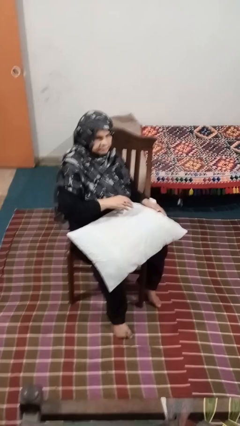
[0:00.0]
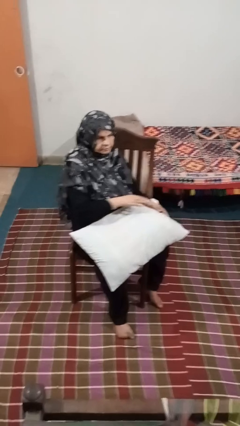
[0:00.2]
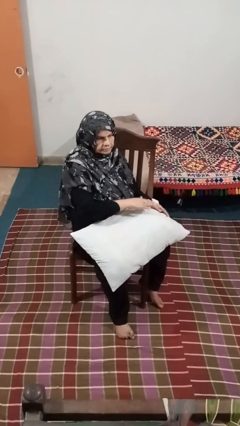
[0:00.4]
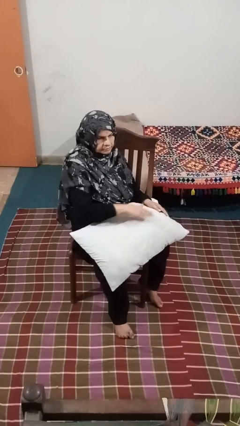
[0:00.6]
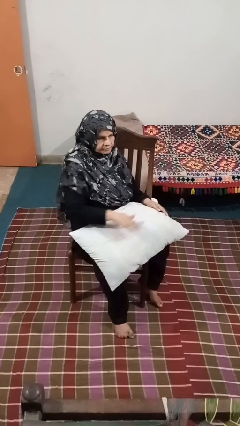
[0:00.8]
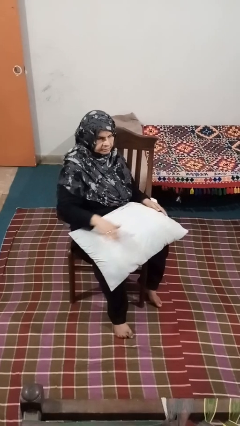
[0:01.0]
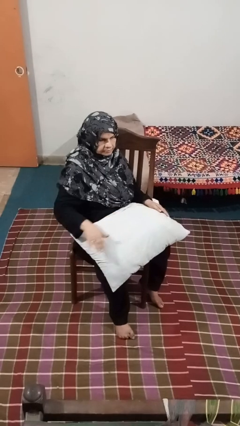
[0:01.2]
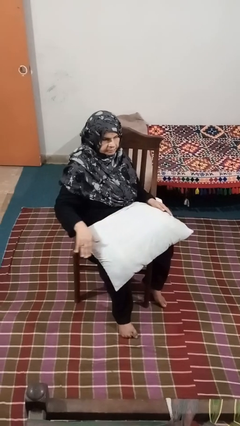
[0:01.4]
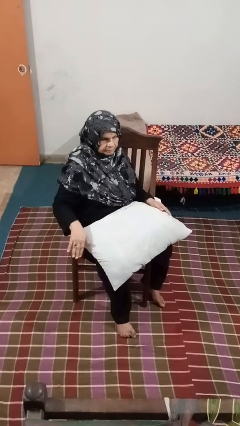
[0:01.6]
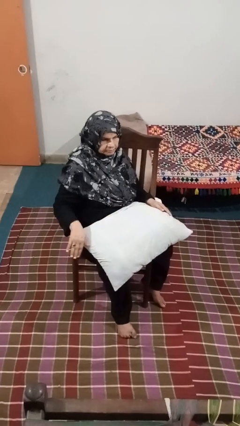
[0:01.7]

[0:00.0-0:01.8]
person waves hand over object

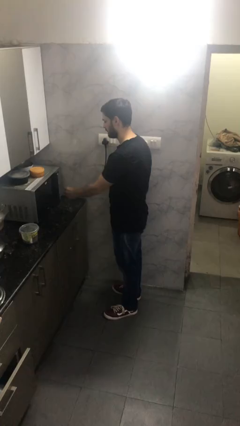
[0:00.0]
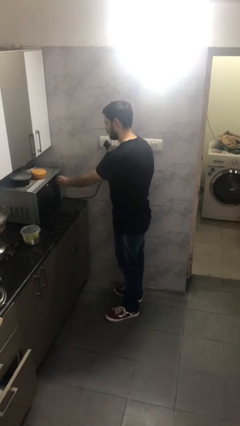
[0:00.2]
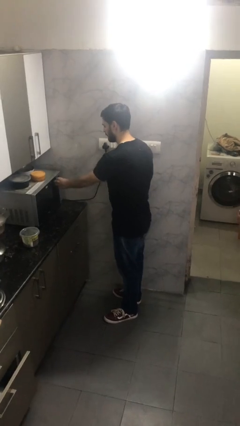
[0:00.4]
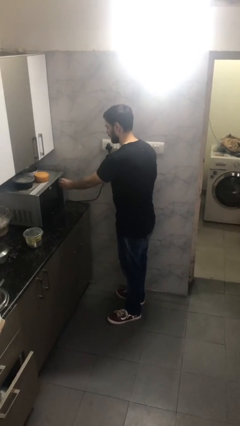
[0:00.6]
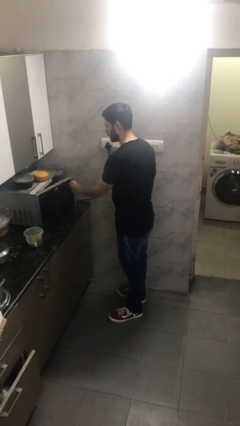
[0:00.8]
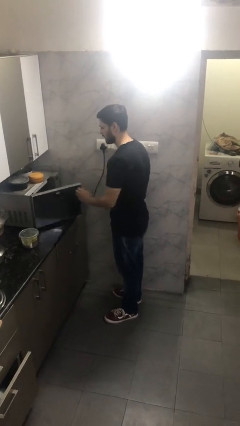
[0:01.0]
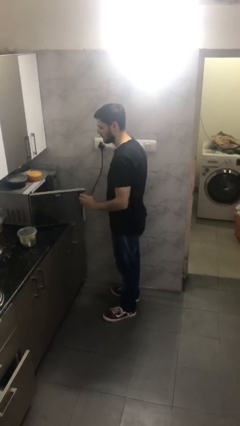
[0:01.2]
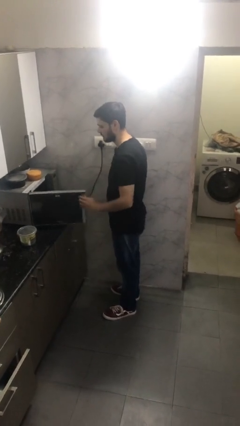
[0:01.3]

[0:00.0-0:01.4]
person opens microwave

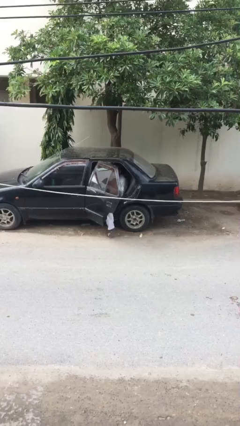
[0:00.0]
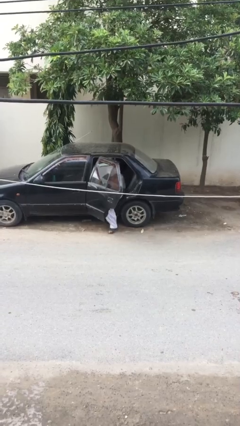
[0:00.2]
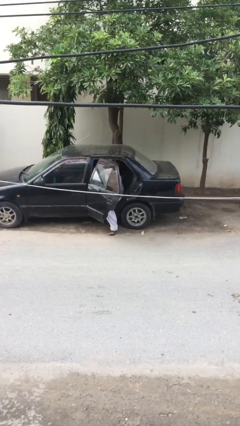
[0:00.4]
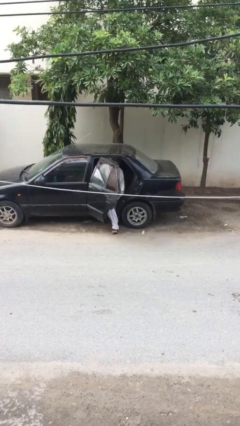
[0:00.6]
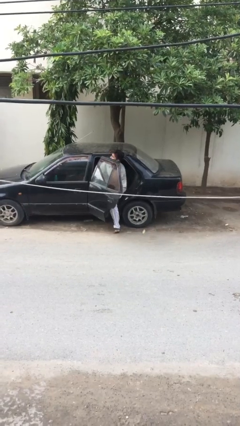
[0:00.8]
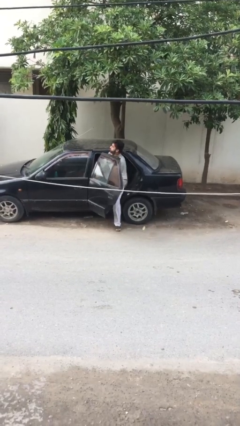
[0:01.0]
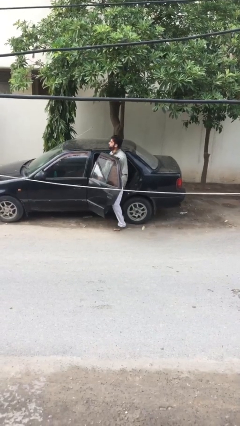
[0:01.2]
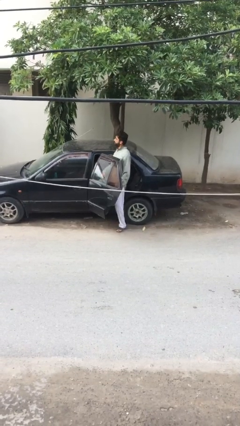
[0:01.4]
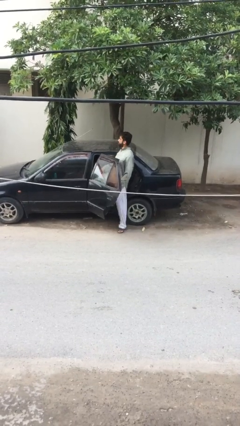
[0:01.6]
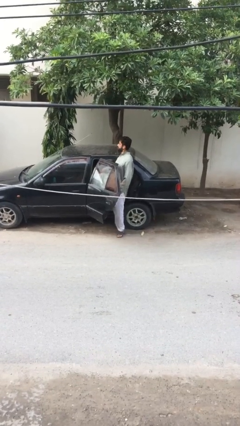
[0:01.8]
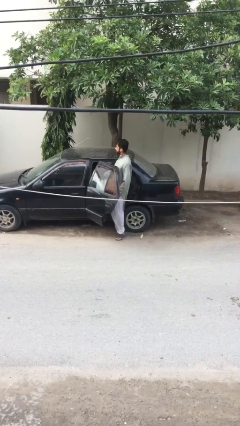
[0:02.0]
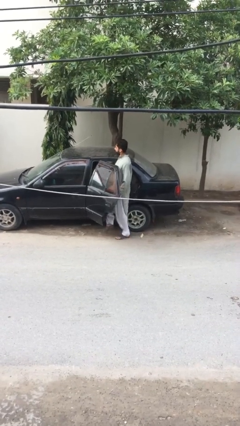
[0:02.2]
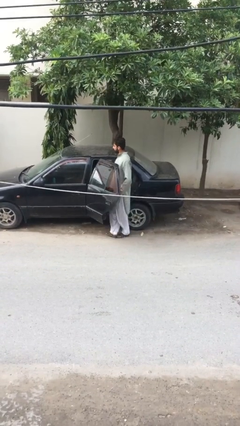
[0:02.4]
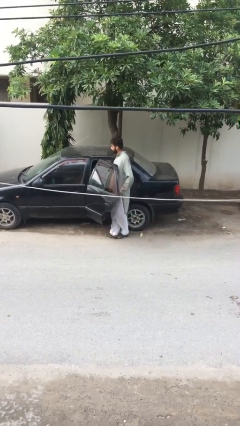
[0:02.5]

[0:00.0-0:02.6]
person exits car

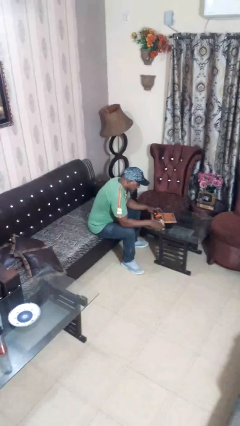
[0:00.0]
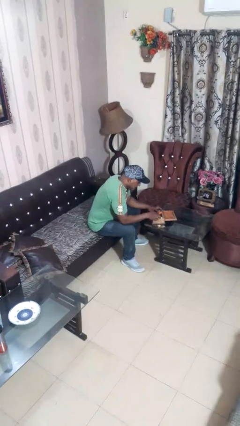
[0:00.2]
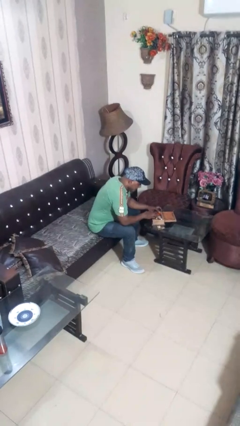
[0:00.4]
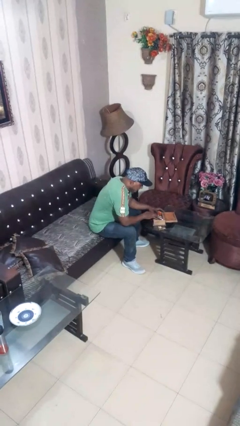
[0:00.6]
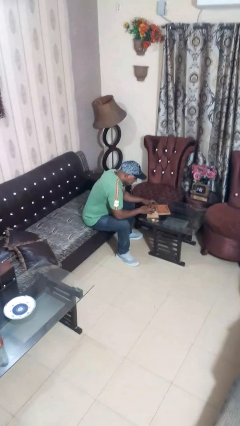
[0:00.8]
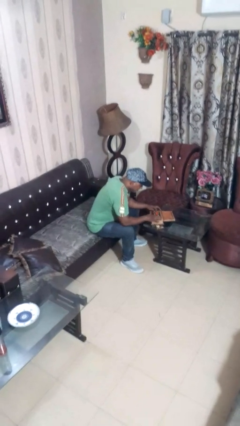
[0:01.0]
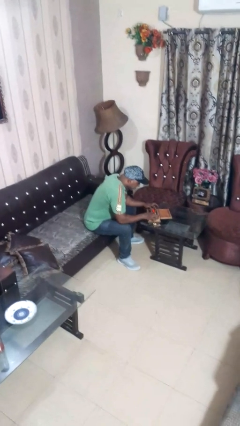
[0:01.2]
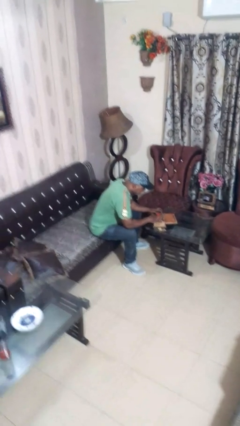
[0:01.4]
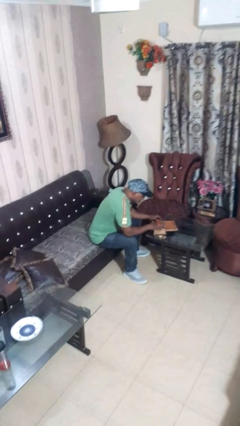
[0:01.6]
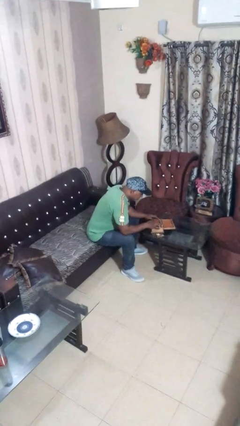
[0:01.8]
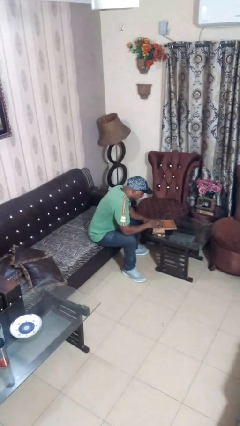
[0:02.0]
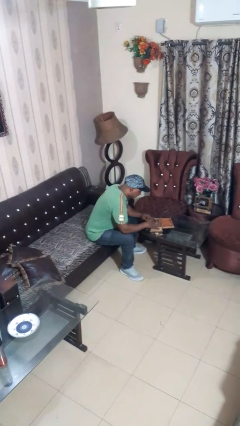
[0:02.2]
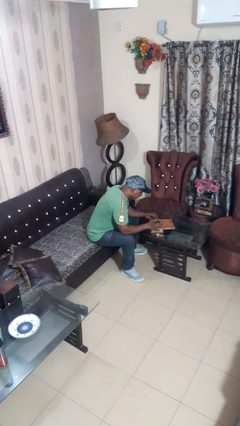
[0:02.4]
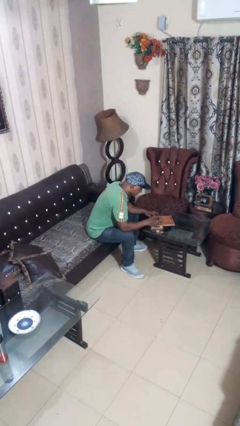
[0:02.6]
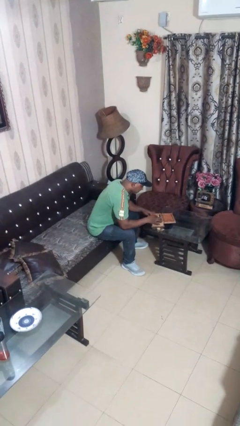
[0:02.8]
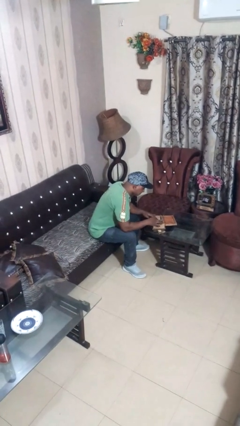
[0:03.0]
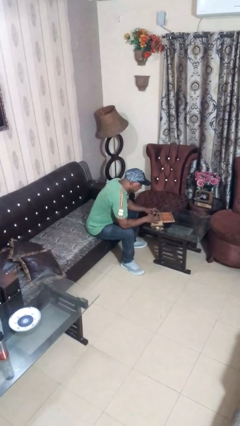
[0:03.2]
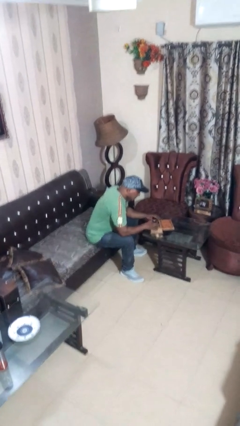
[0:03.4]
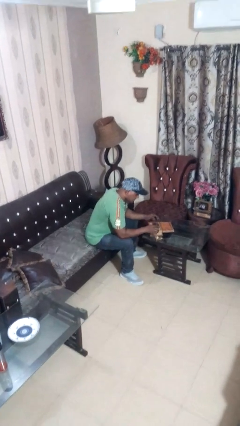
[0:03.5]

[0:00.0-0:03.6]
person searches jewelry box

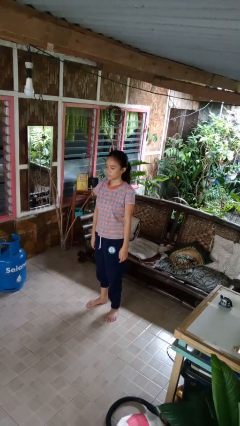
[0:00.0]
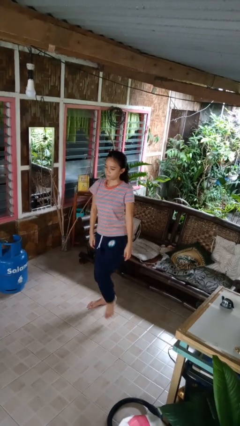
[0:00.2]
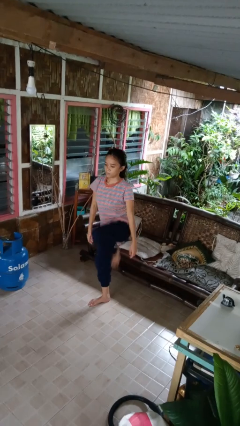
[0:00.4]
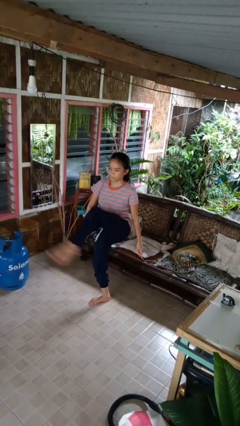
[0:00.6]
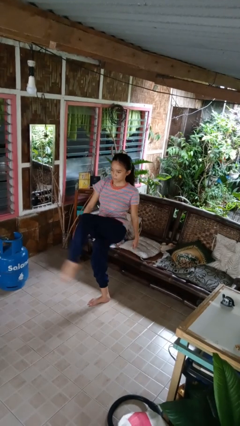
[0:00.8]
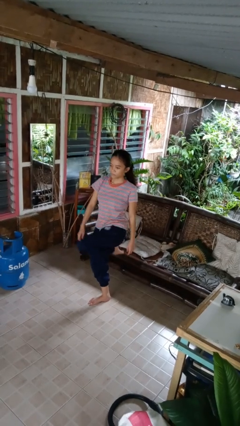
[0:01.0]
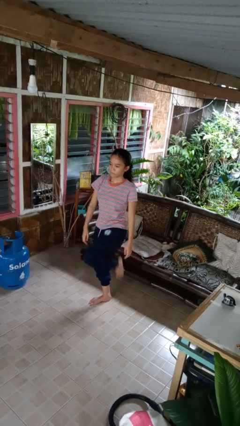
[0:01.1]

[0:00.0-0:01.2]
person karate kicks

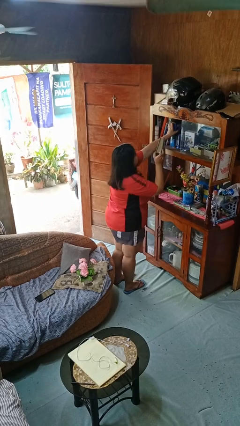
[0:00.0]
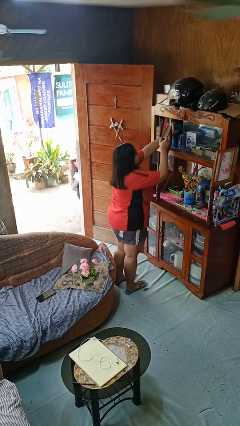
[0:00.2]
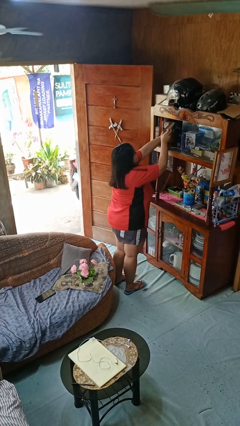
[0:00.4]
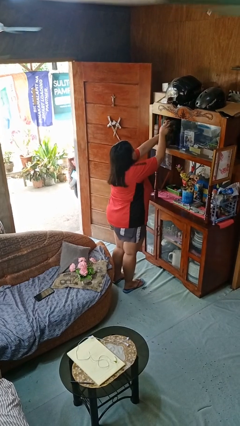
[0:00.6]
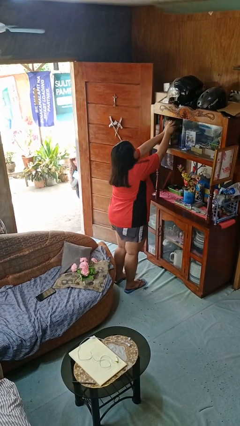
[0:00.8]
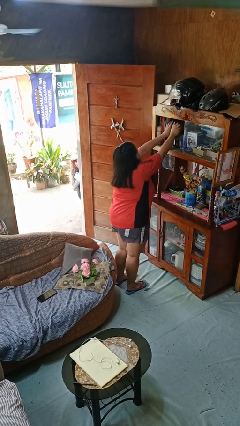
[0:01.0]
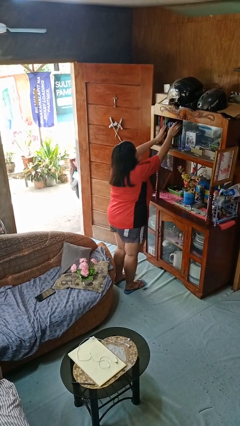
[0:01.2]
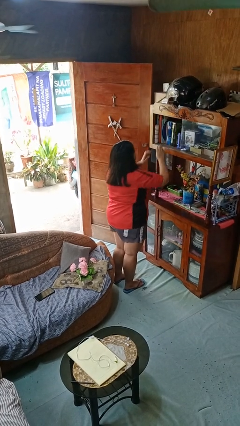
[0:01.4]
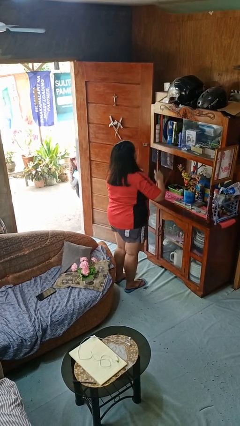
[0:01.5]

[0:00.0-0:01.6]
person puts down object on shelf

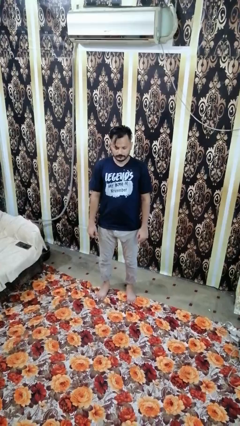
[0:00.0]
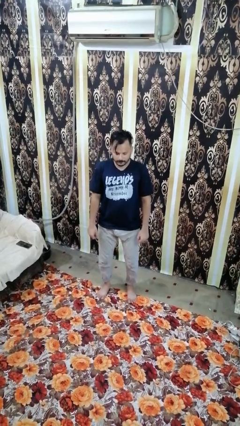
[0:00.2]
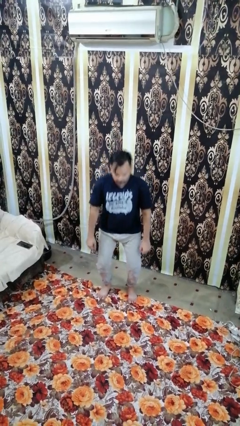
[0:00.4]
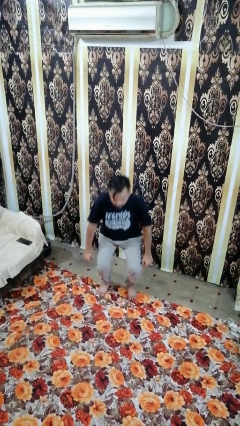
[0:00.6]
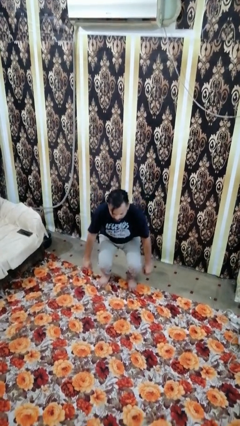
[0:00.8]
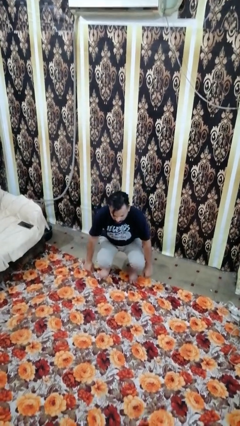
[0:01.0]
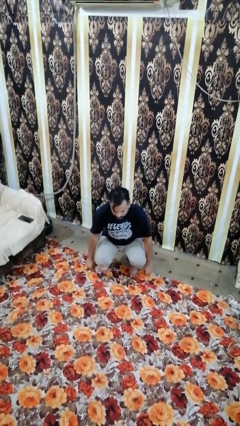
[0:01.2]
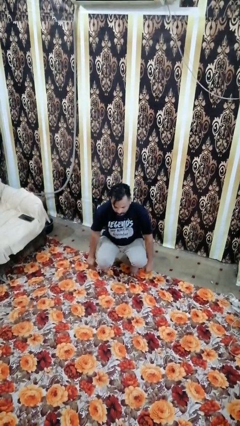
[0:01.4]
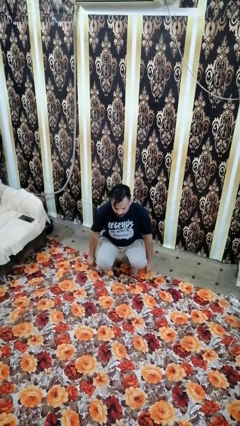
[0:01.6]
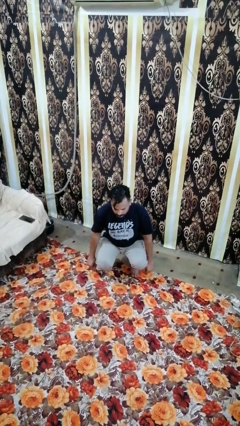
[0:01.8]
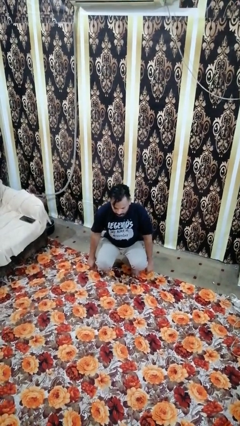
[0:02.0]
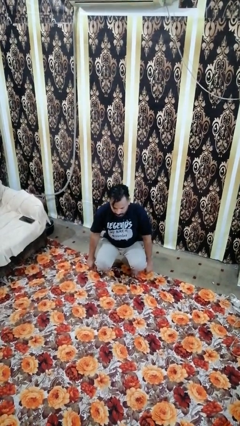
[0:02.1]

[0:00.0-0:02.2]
person squats

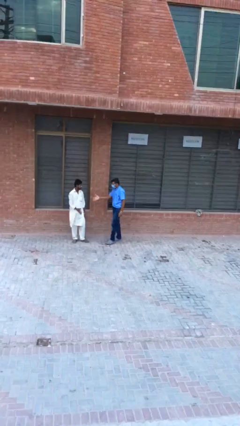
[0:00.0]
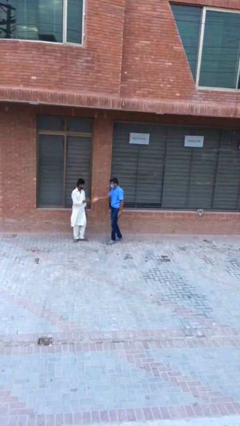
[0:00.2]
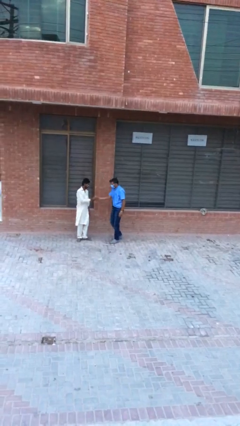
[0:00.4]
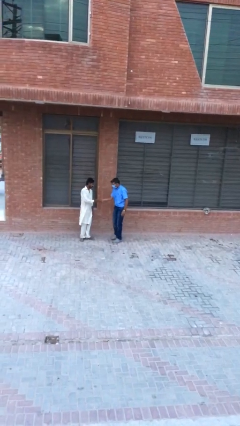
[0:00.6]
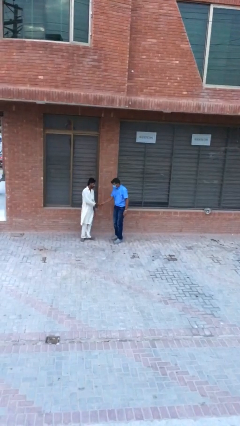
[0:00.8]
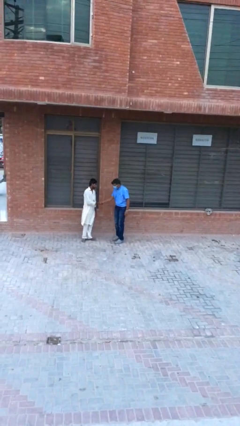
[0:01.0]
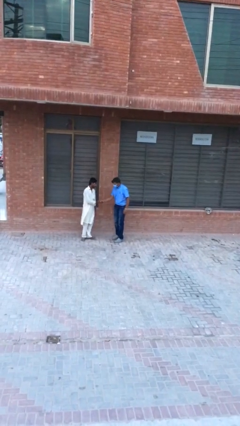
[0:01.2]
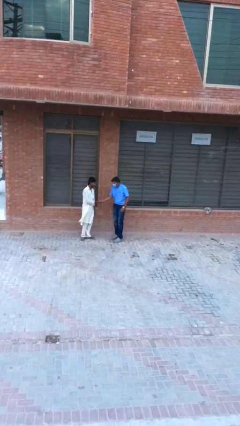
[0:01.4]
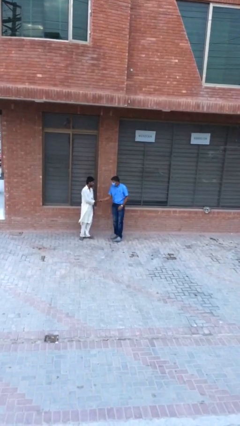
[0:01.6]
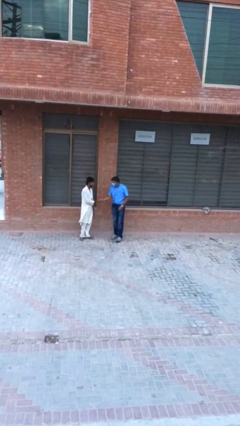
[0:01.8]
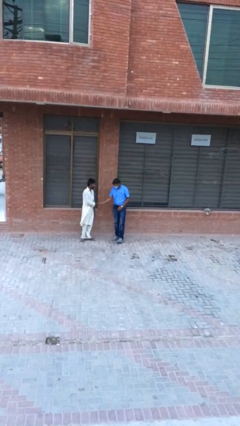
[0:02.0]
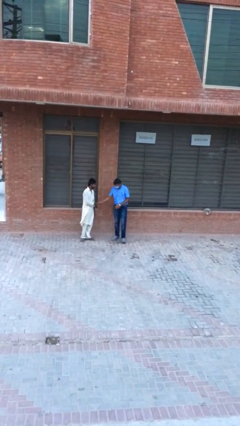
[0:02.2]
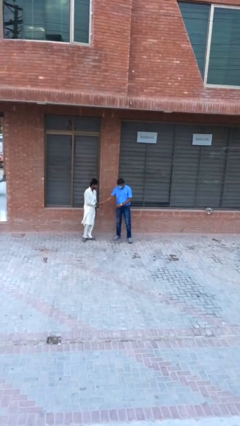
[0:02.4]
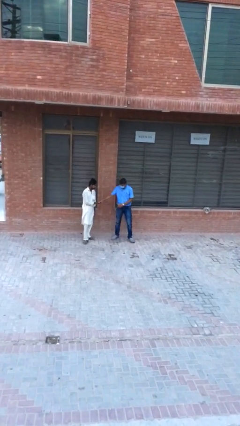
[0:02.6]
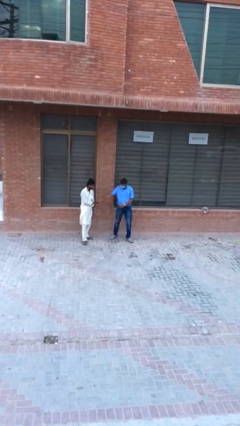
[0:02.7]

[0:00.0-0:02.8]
person shakes hand
